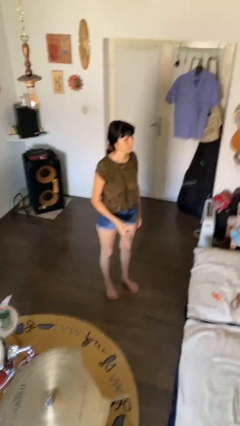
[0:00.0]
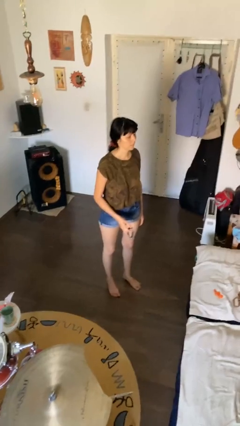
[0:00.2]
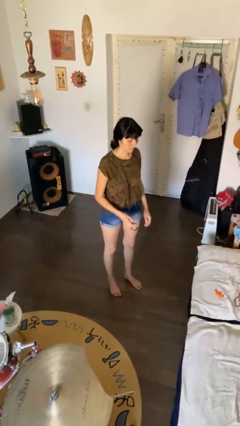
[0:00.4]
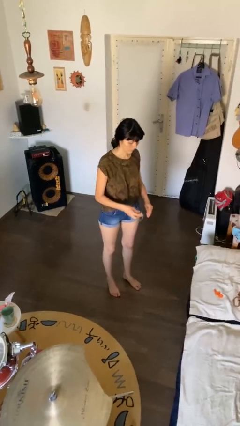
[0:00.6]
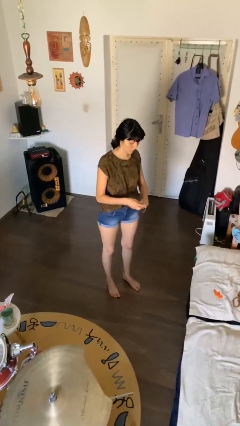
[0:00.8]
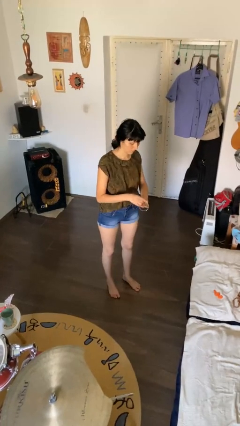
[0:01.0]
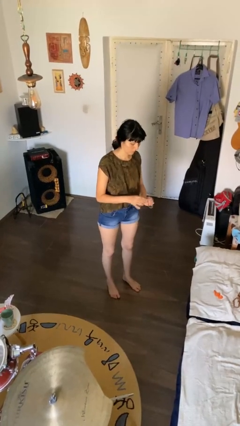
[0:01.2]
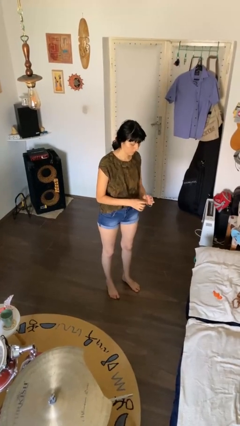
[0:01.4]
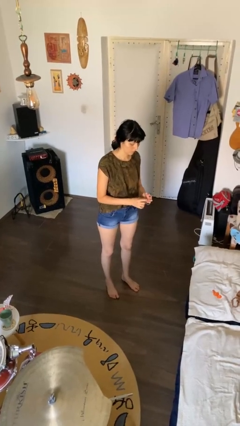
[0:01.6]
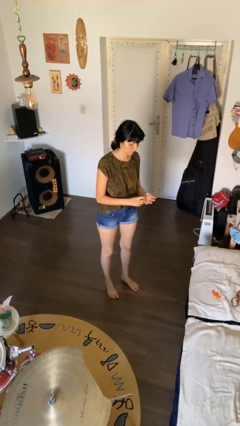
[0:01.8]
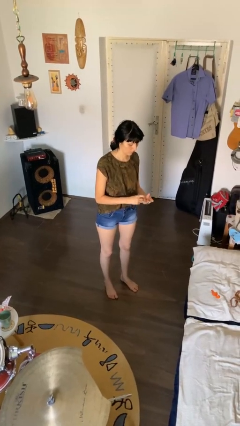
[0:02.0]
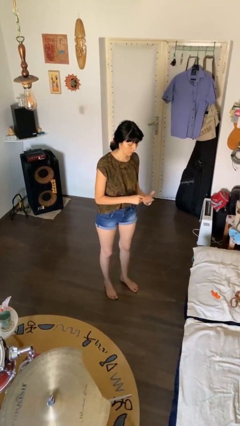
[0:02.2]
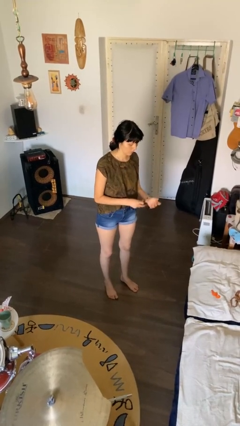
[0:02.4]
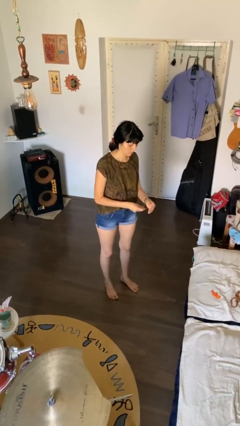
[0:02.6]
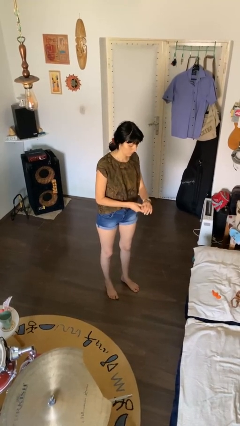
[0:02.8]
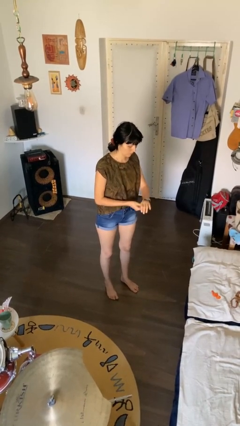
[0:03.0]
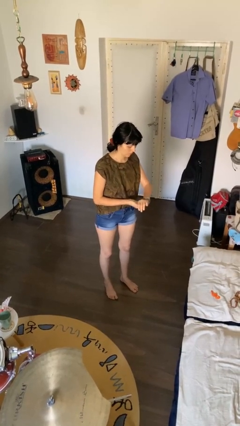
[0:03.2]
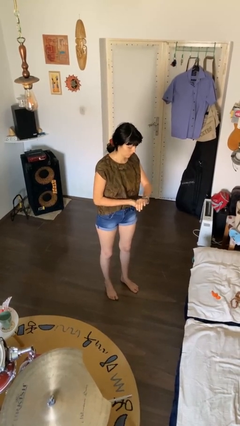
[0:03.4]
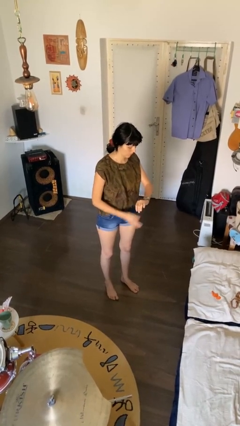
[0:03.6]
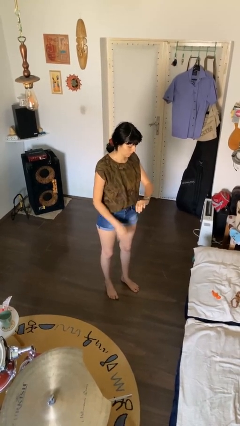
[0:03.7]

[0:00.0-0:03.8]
person puts on wristwatch

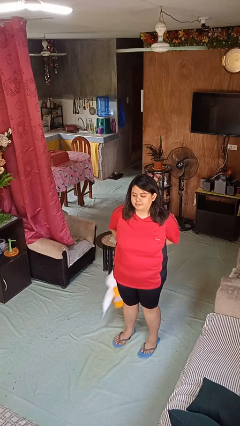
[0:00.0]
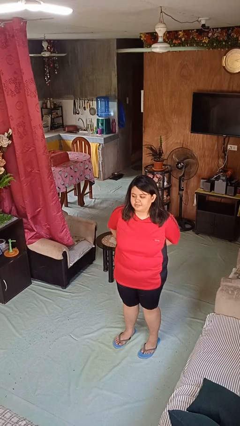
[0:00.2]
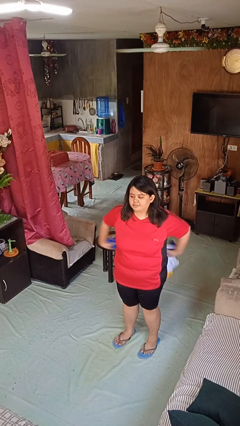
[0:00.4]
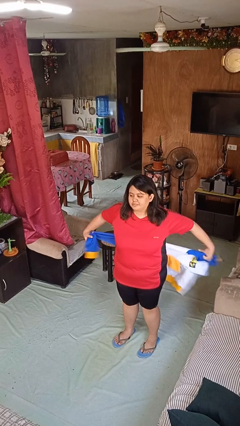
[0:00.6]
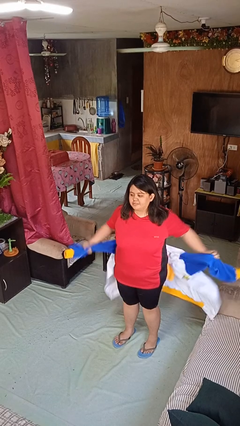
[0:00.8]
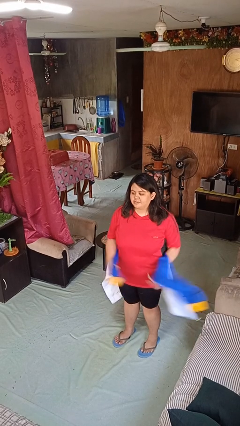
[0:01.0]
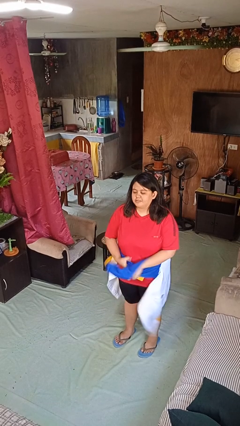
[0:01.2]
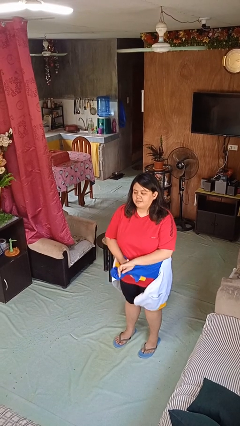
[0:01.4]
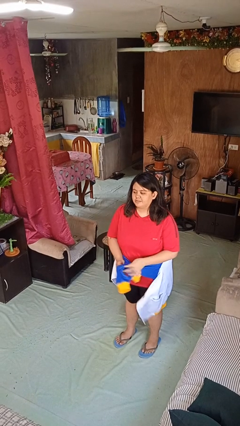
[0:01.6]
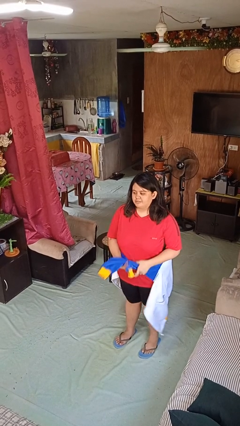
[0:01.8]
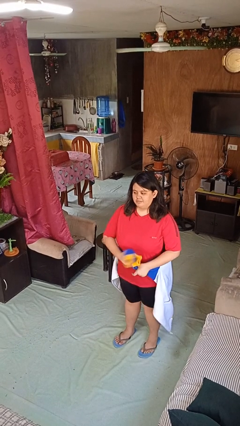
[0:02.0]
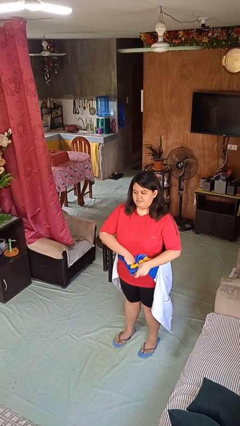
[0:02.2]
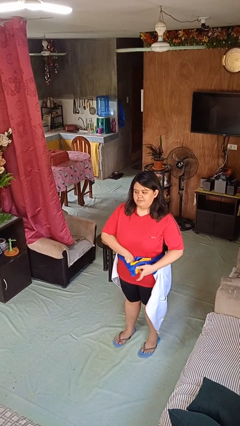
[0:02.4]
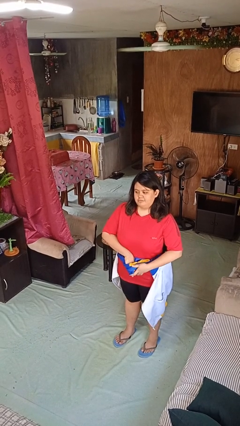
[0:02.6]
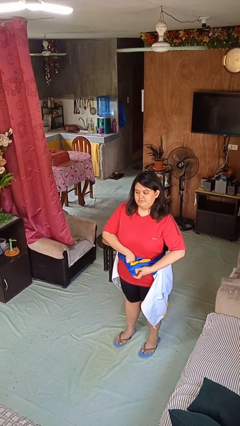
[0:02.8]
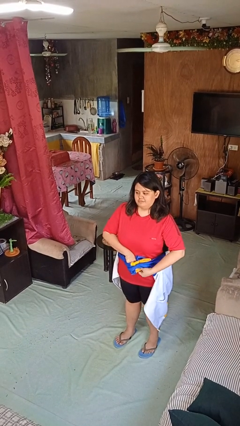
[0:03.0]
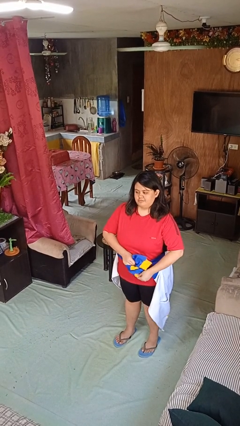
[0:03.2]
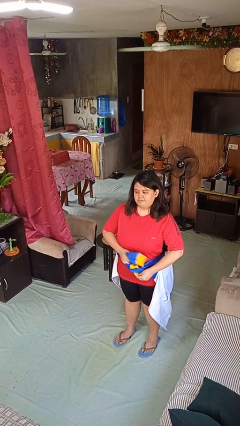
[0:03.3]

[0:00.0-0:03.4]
person ties jacket around waist

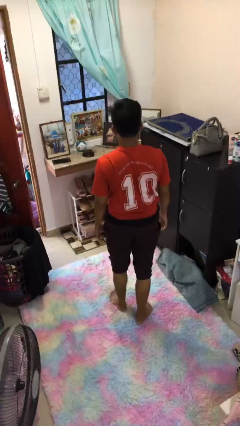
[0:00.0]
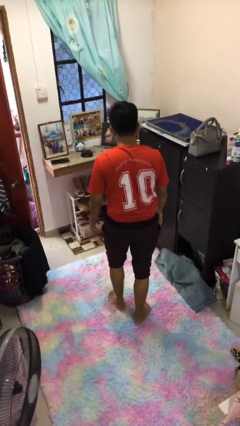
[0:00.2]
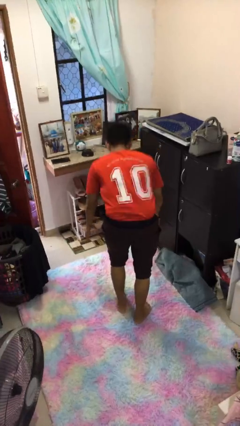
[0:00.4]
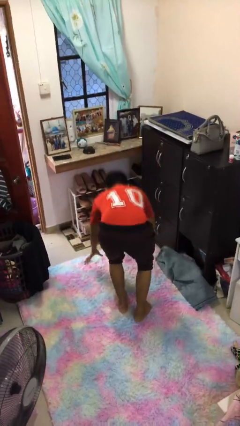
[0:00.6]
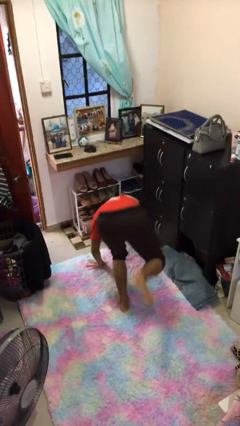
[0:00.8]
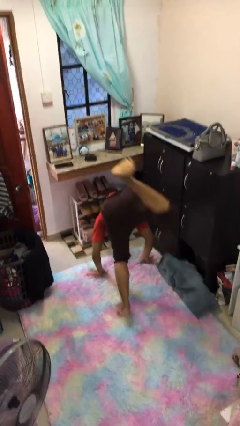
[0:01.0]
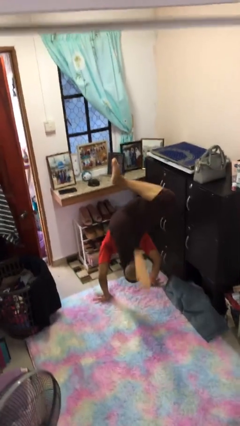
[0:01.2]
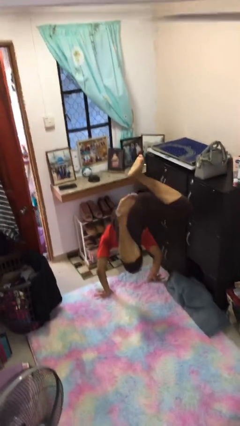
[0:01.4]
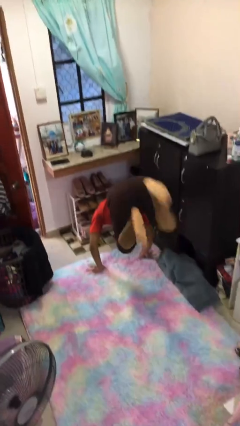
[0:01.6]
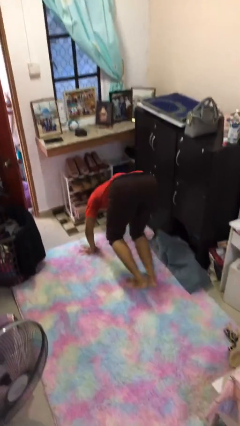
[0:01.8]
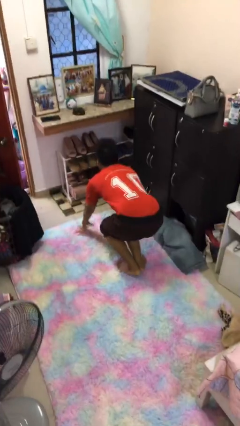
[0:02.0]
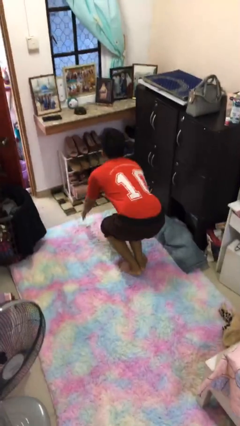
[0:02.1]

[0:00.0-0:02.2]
person handstand

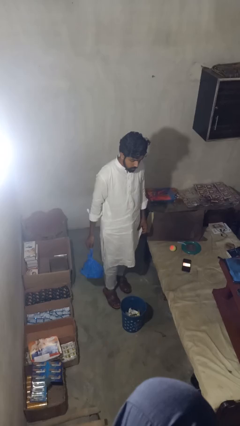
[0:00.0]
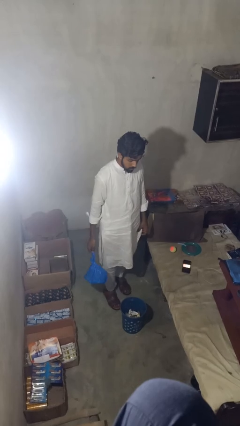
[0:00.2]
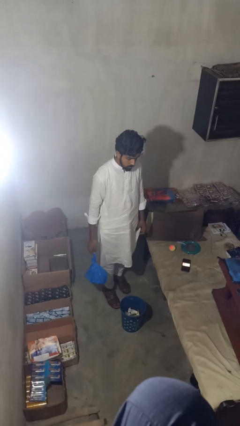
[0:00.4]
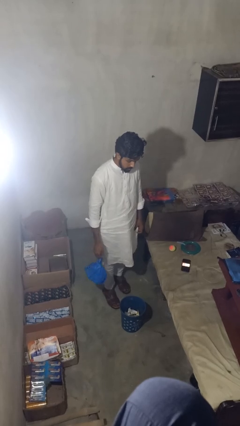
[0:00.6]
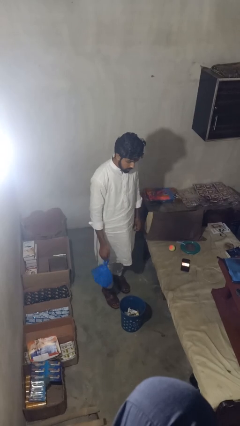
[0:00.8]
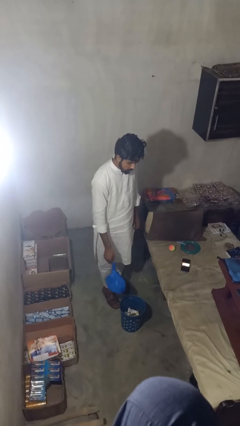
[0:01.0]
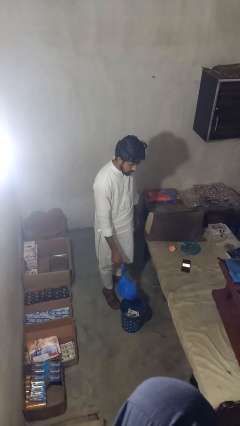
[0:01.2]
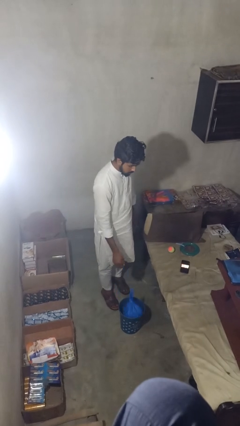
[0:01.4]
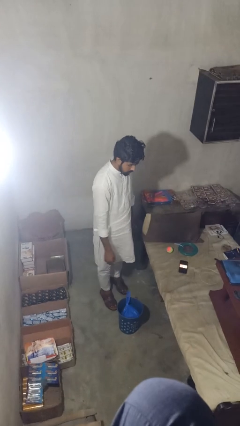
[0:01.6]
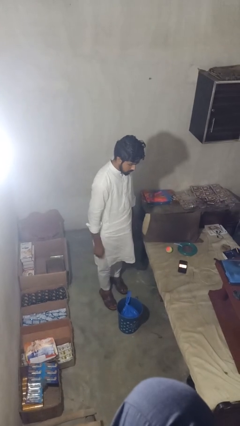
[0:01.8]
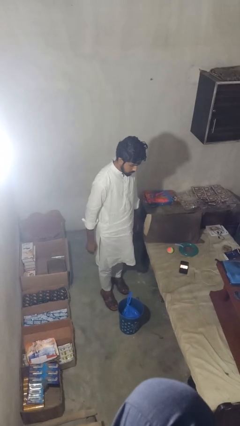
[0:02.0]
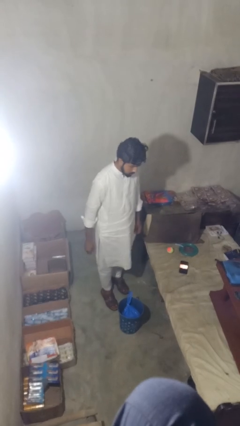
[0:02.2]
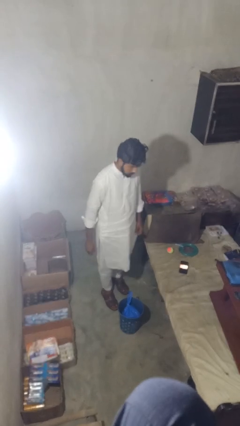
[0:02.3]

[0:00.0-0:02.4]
person puts object into basket

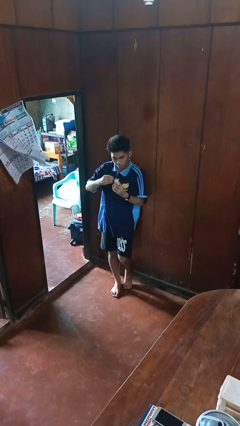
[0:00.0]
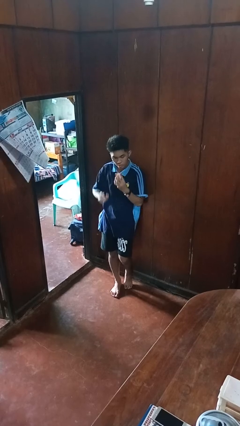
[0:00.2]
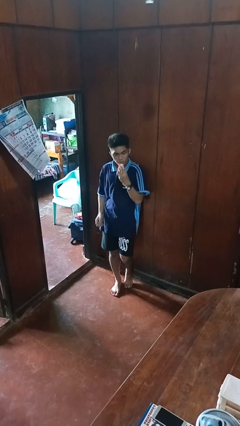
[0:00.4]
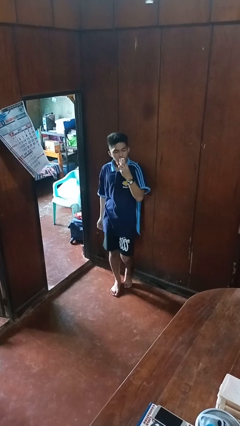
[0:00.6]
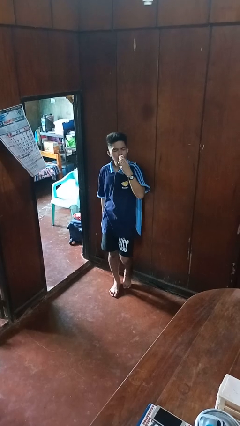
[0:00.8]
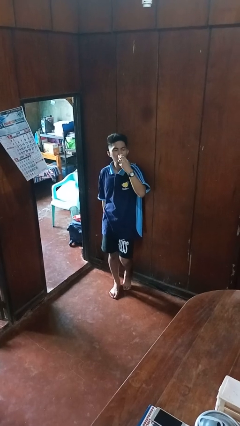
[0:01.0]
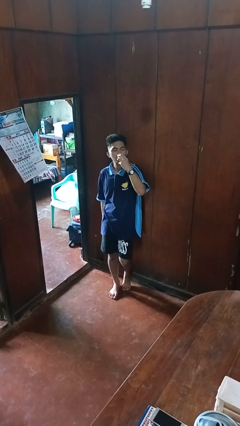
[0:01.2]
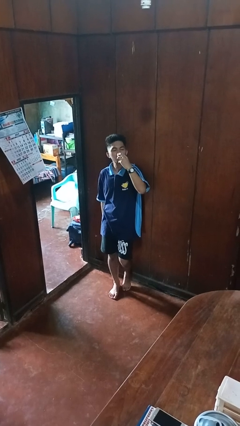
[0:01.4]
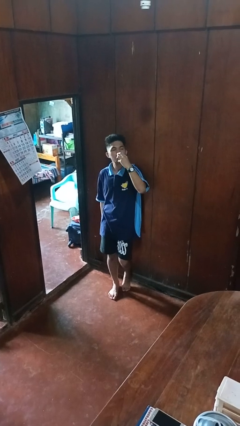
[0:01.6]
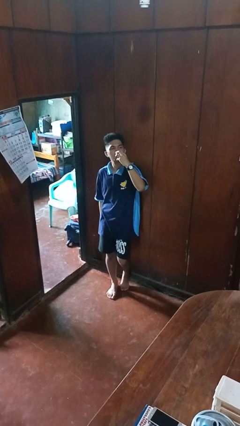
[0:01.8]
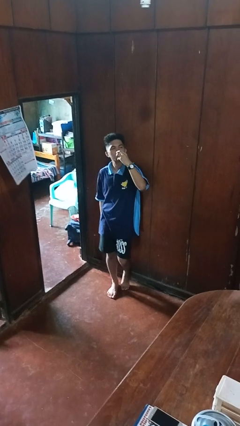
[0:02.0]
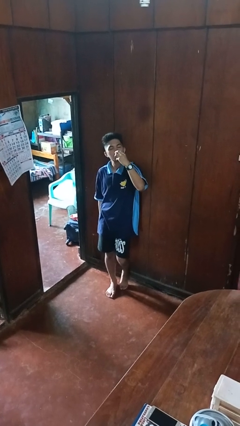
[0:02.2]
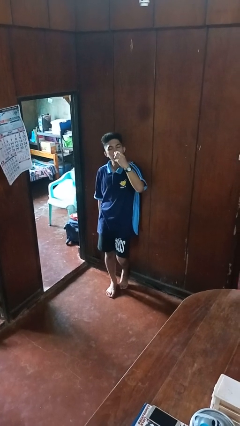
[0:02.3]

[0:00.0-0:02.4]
person drinks from beverage can

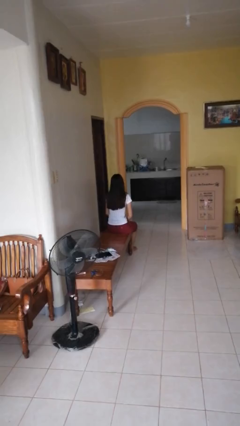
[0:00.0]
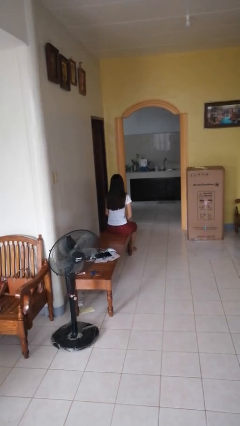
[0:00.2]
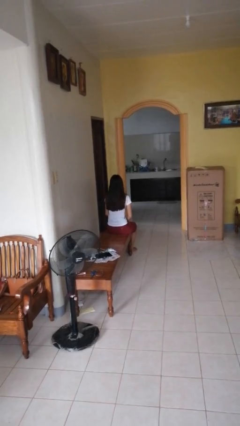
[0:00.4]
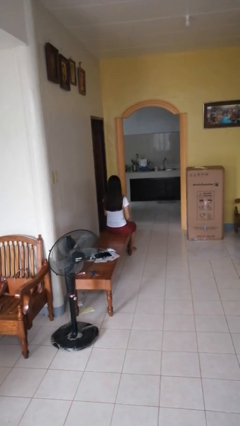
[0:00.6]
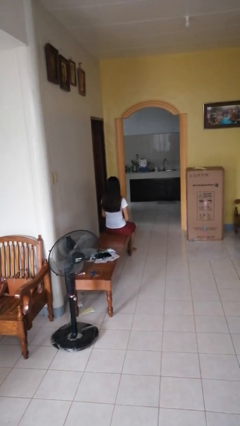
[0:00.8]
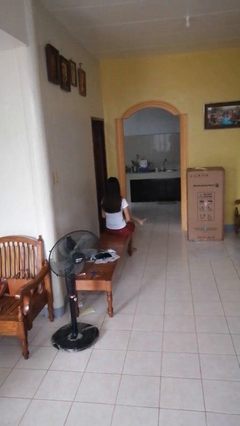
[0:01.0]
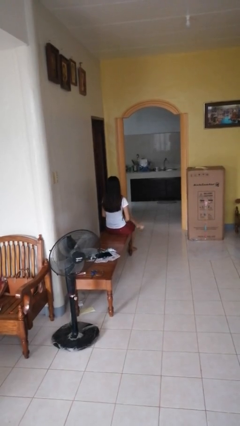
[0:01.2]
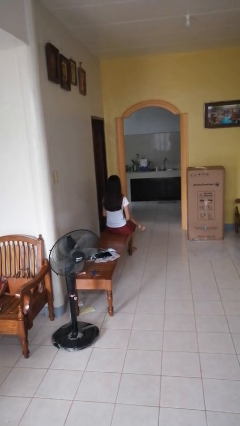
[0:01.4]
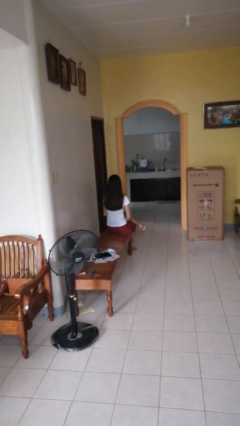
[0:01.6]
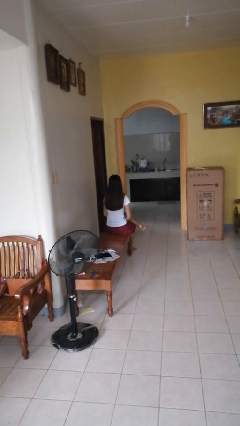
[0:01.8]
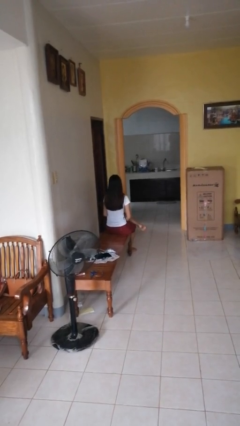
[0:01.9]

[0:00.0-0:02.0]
person crosses legs

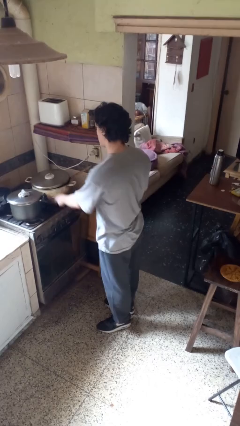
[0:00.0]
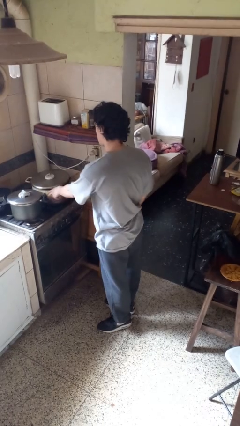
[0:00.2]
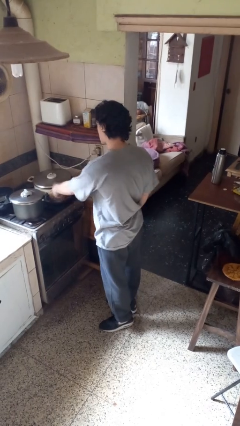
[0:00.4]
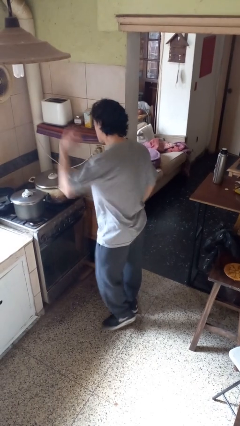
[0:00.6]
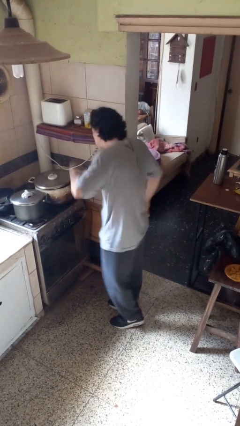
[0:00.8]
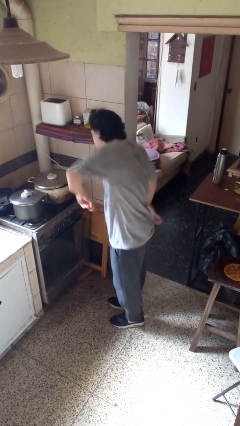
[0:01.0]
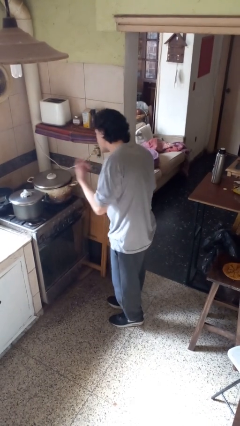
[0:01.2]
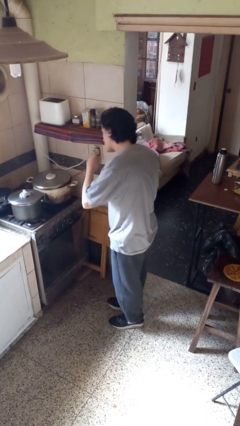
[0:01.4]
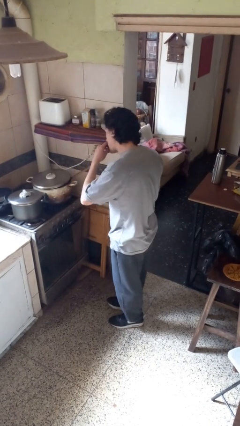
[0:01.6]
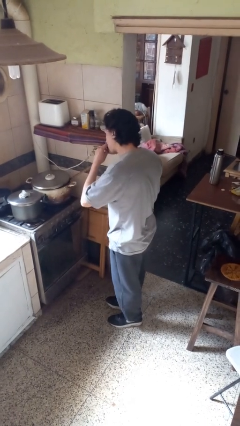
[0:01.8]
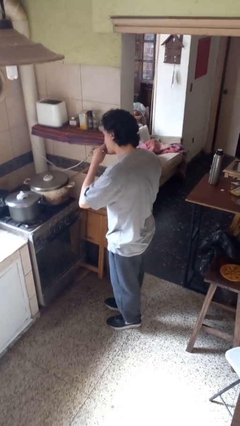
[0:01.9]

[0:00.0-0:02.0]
person burns hand
